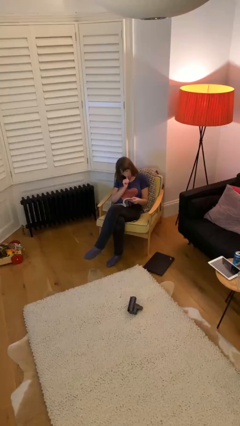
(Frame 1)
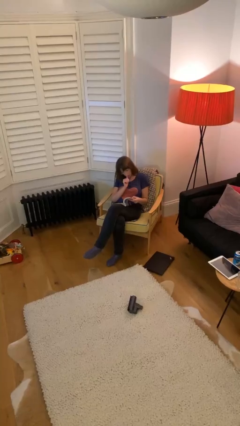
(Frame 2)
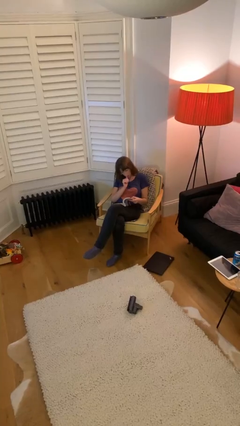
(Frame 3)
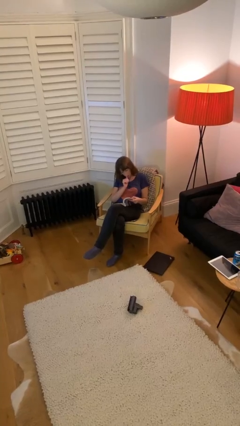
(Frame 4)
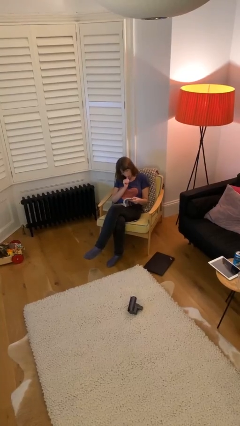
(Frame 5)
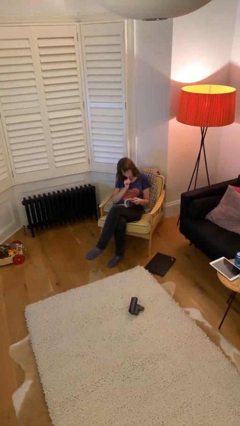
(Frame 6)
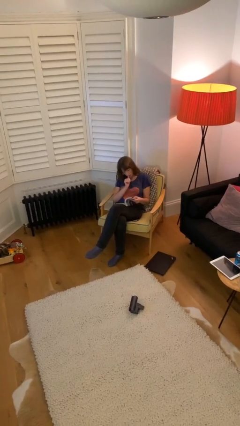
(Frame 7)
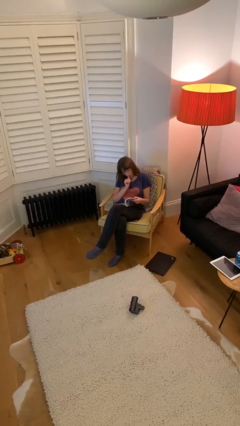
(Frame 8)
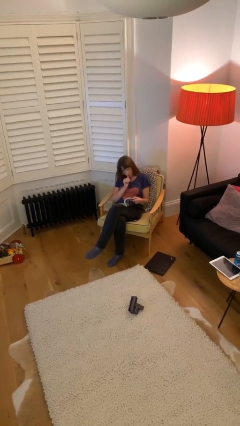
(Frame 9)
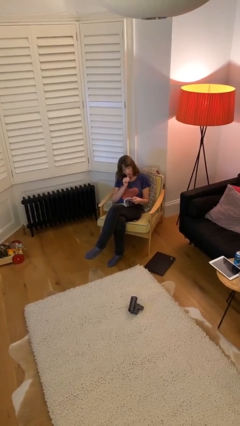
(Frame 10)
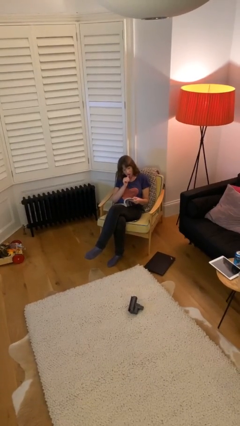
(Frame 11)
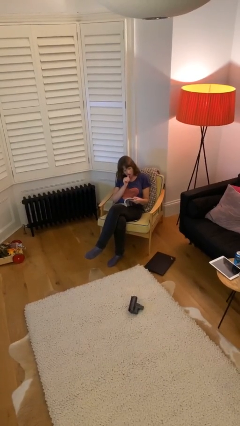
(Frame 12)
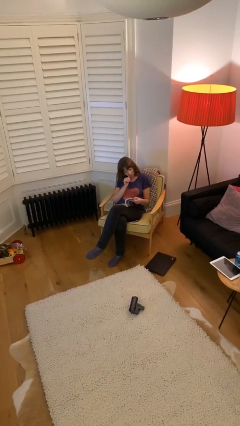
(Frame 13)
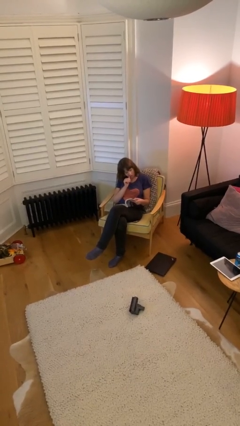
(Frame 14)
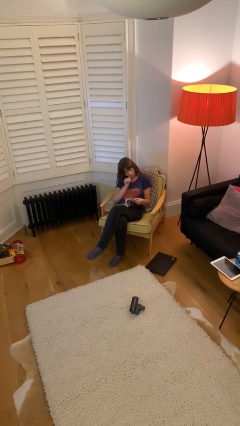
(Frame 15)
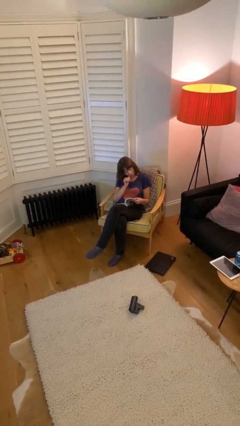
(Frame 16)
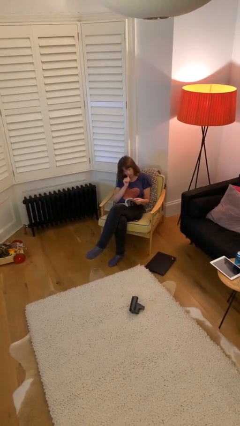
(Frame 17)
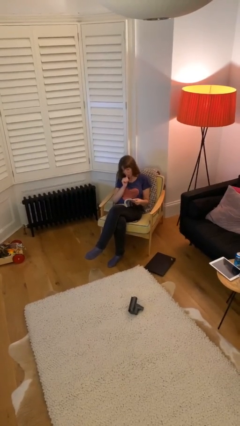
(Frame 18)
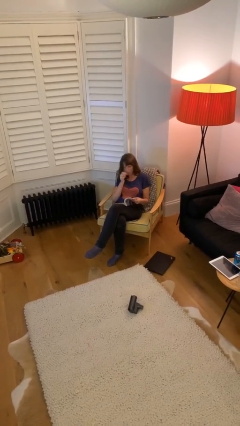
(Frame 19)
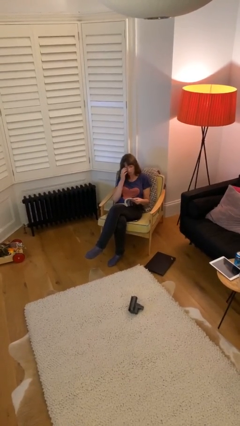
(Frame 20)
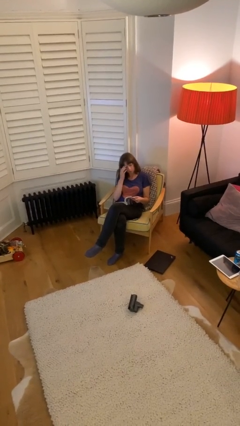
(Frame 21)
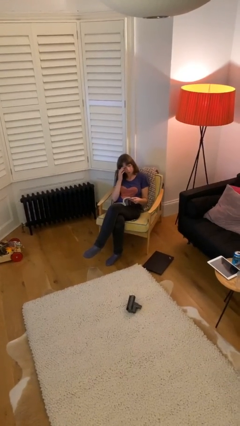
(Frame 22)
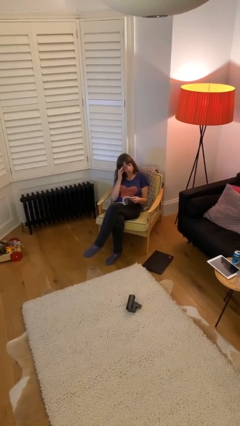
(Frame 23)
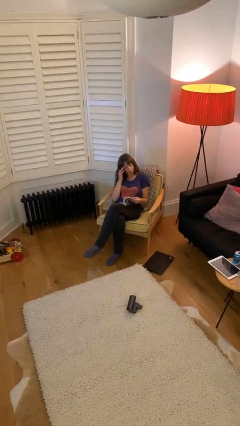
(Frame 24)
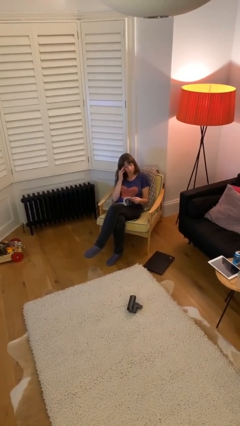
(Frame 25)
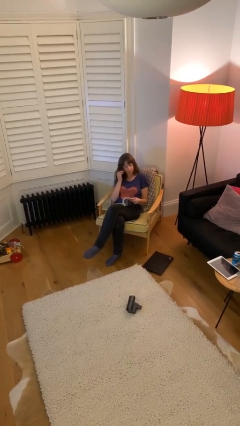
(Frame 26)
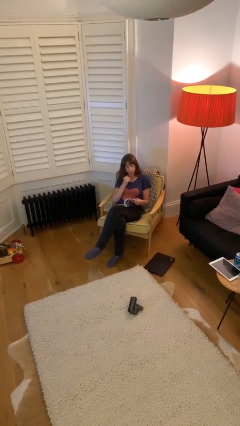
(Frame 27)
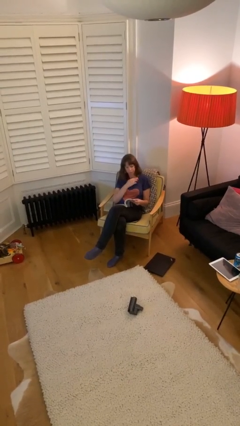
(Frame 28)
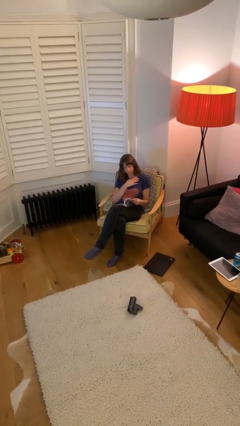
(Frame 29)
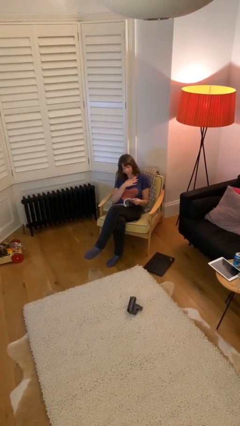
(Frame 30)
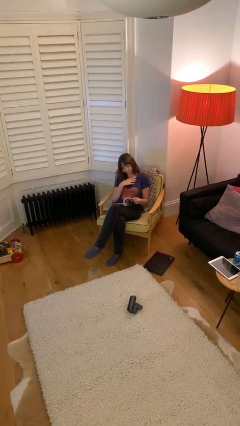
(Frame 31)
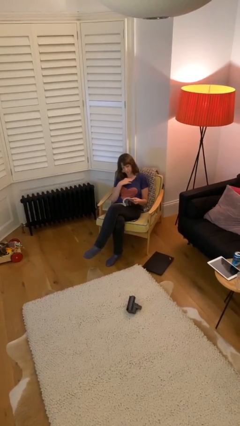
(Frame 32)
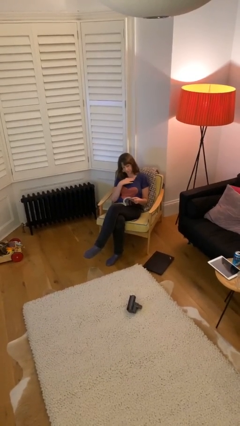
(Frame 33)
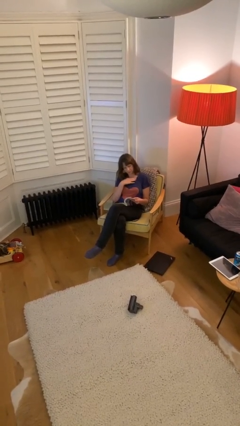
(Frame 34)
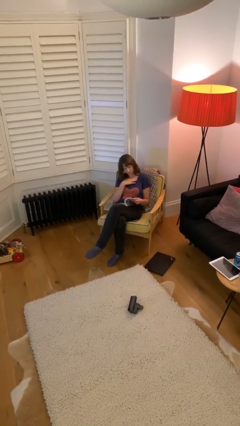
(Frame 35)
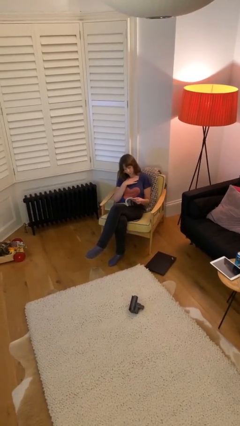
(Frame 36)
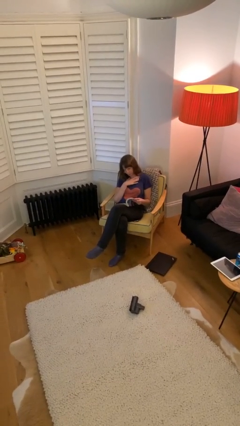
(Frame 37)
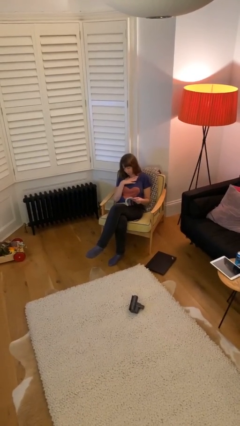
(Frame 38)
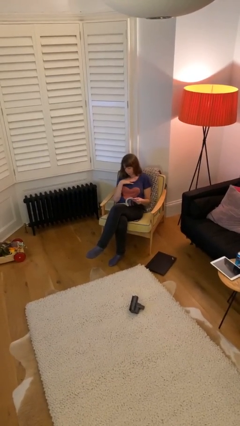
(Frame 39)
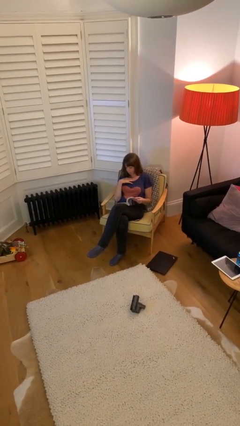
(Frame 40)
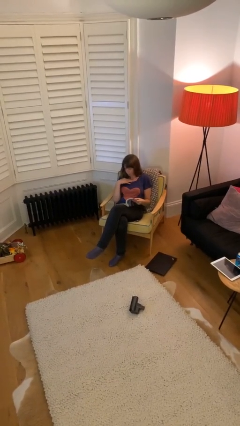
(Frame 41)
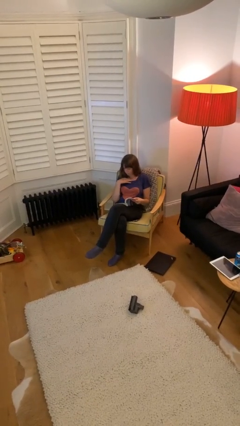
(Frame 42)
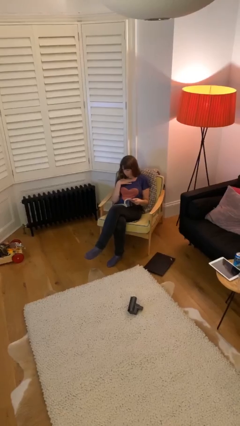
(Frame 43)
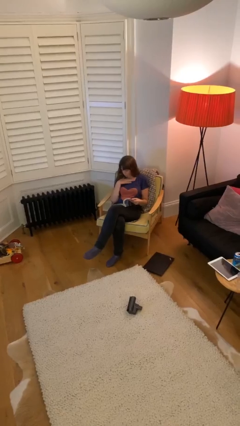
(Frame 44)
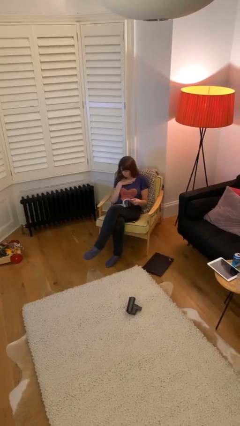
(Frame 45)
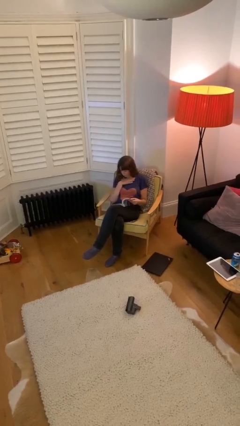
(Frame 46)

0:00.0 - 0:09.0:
person reads document

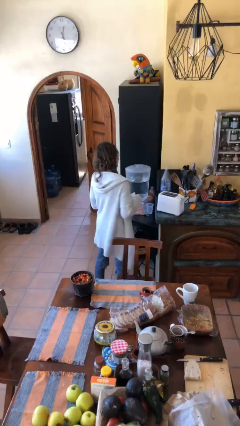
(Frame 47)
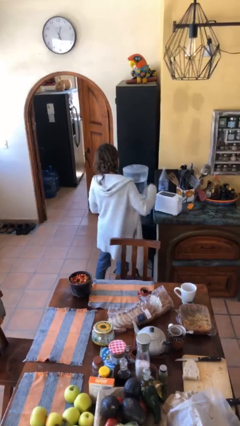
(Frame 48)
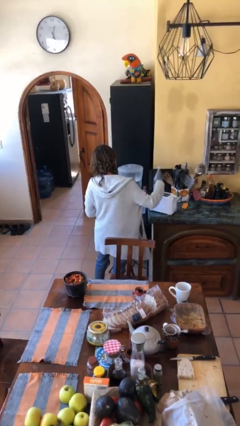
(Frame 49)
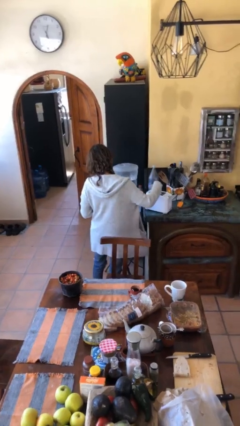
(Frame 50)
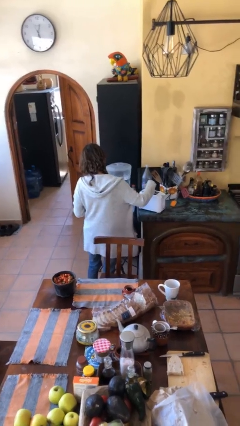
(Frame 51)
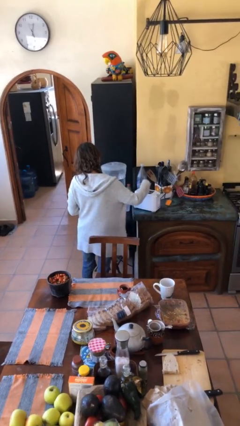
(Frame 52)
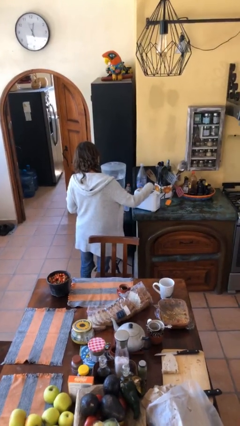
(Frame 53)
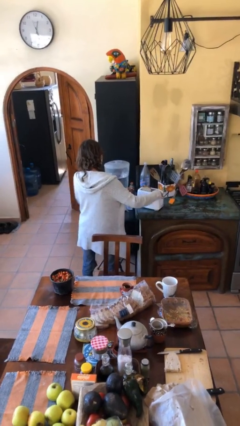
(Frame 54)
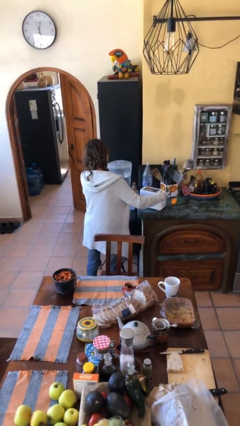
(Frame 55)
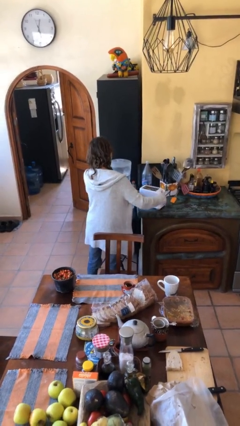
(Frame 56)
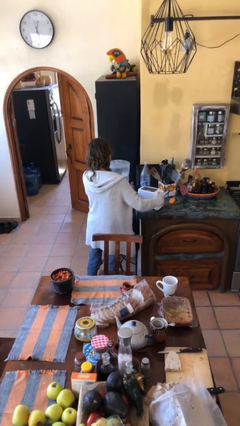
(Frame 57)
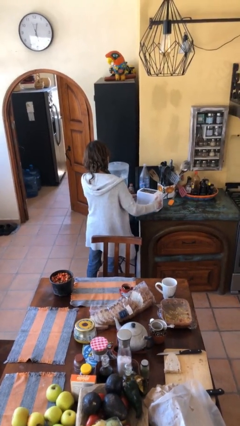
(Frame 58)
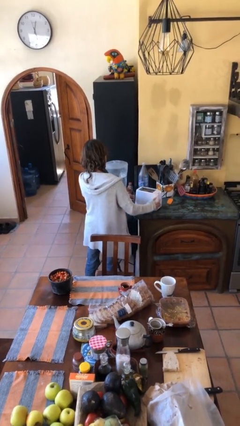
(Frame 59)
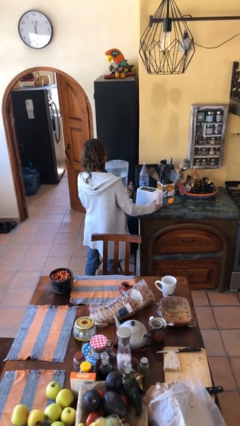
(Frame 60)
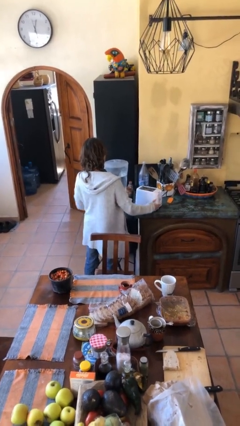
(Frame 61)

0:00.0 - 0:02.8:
person puts object into toaster

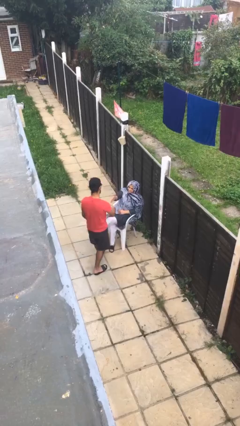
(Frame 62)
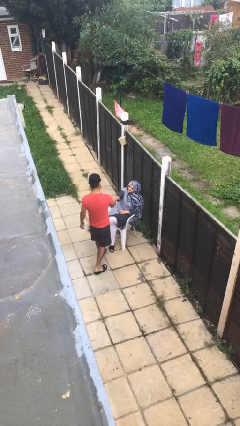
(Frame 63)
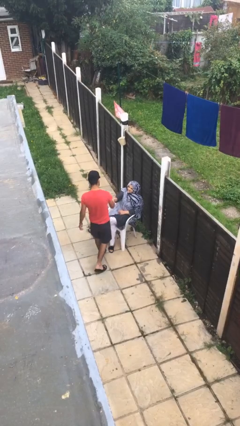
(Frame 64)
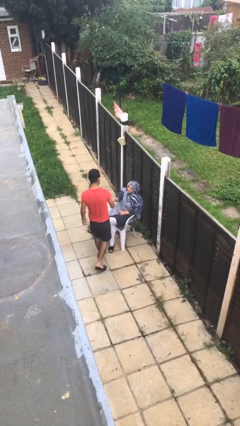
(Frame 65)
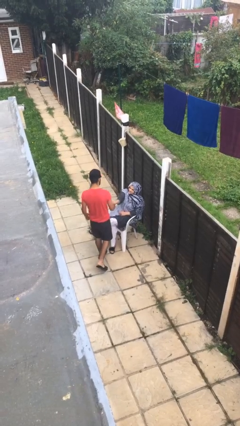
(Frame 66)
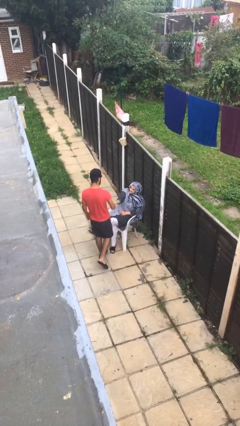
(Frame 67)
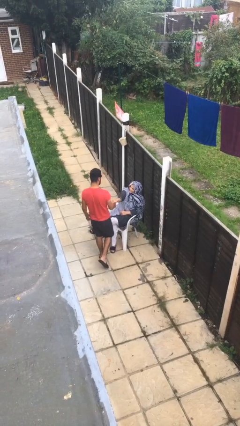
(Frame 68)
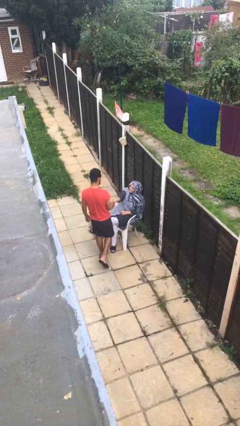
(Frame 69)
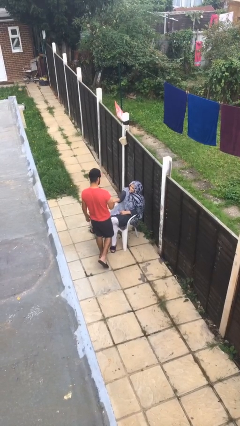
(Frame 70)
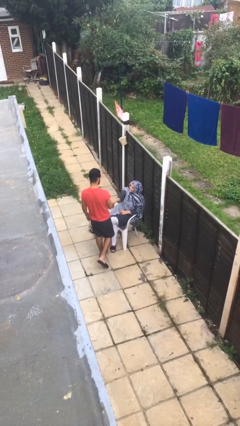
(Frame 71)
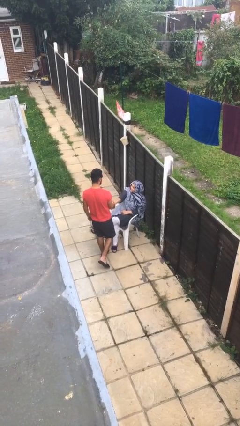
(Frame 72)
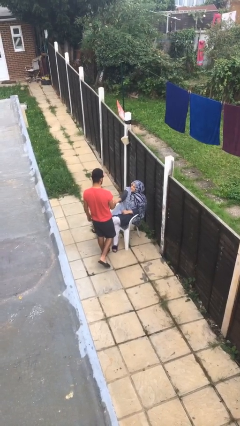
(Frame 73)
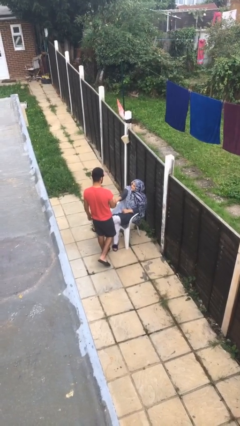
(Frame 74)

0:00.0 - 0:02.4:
person shakes hand

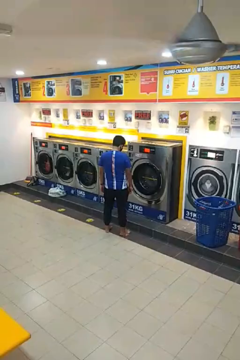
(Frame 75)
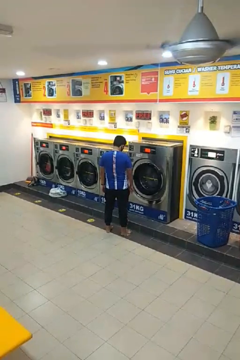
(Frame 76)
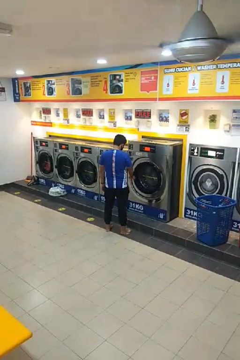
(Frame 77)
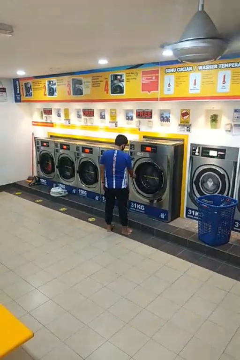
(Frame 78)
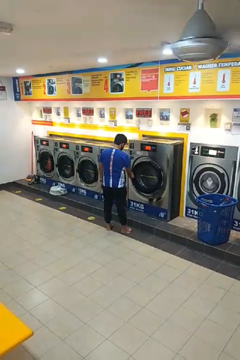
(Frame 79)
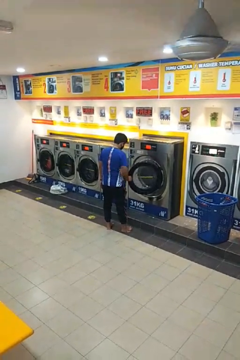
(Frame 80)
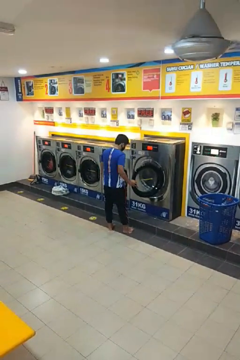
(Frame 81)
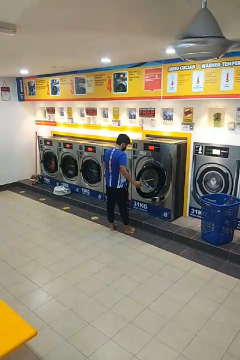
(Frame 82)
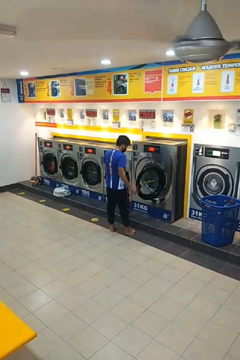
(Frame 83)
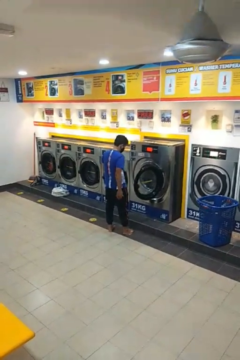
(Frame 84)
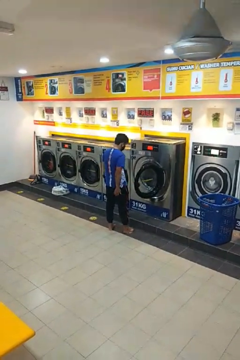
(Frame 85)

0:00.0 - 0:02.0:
person opens clothes washer

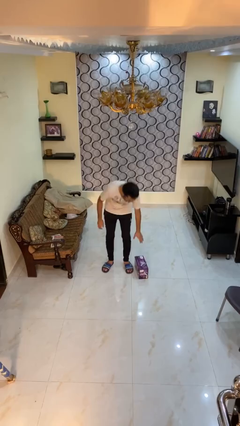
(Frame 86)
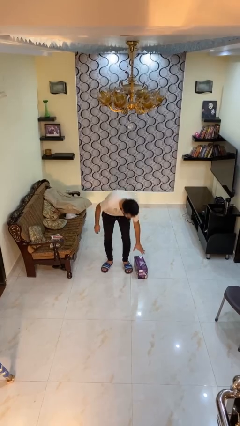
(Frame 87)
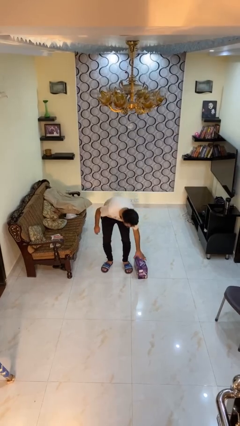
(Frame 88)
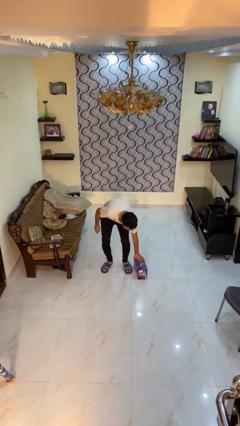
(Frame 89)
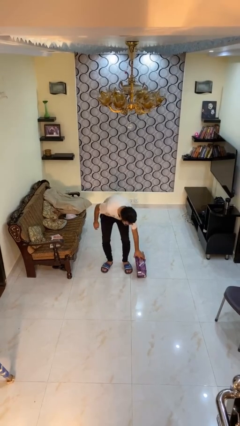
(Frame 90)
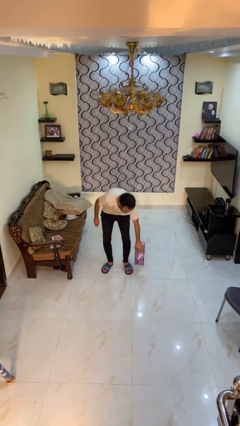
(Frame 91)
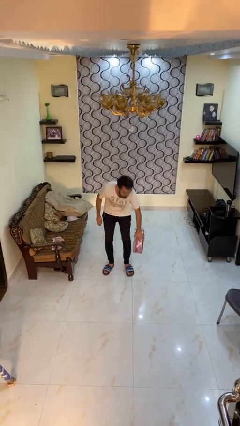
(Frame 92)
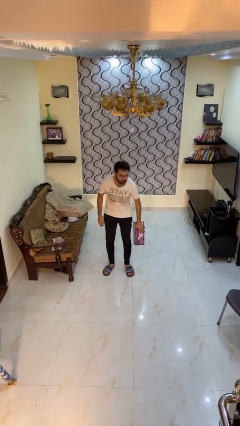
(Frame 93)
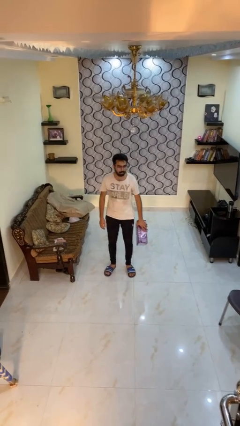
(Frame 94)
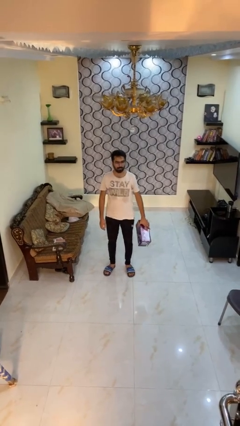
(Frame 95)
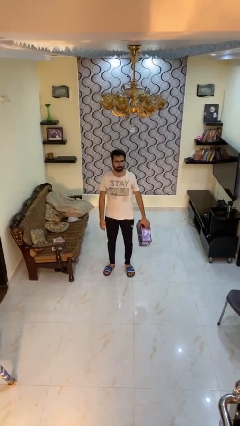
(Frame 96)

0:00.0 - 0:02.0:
person picks up object from floor
